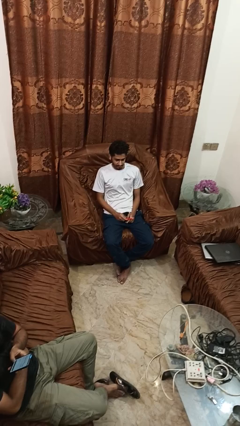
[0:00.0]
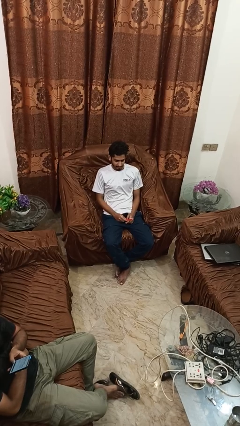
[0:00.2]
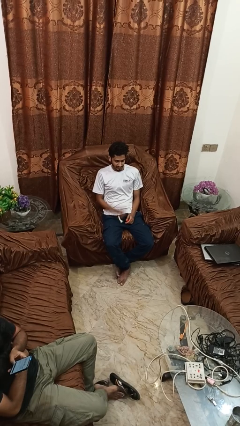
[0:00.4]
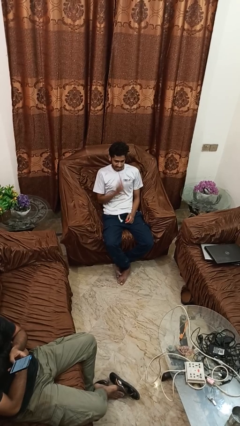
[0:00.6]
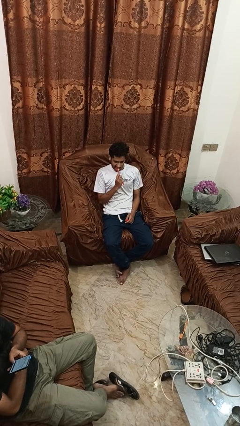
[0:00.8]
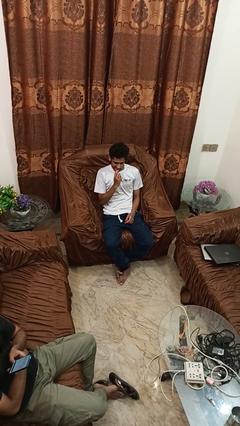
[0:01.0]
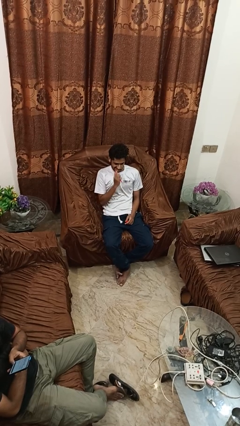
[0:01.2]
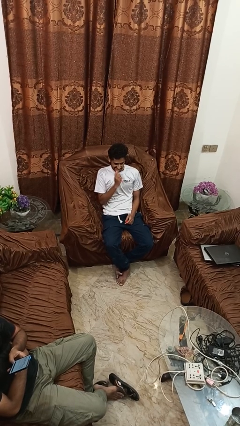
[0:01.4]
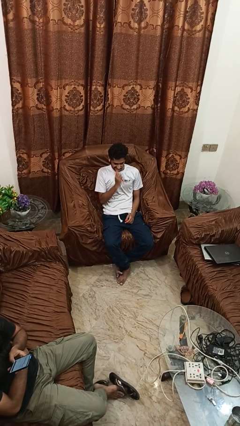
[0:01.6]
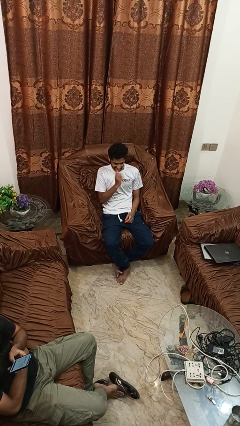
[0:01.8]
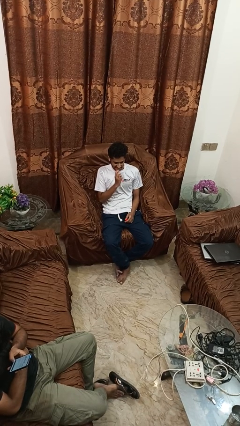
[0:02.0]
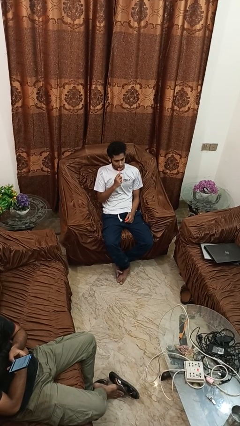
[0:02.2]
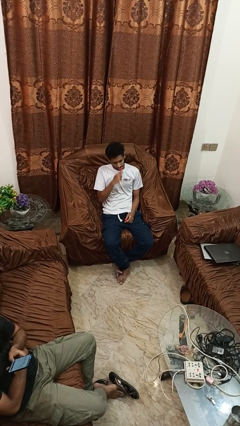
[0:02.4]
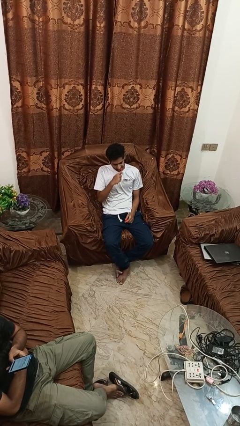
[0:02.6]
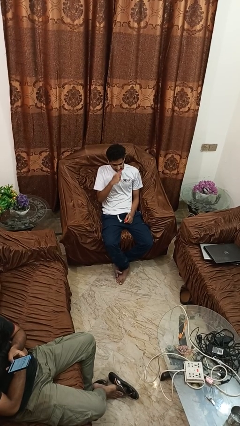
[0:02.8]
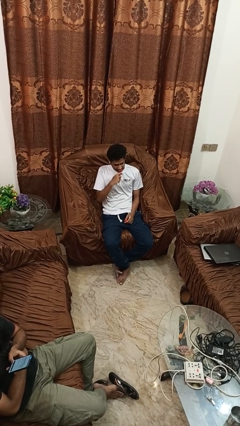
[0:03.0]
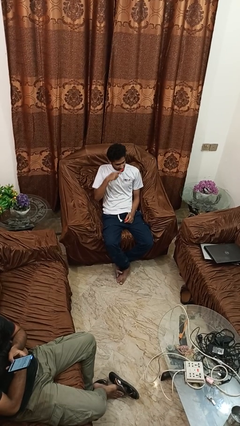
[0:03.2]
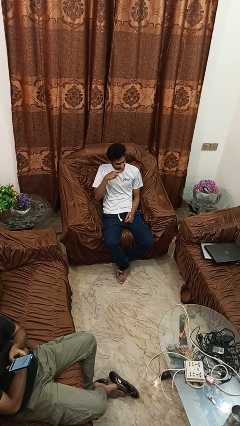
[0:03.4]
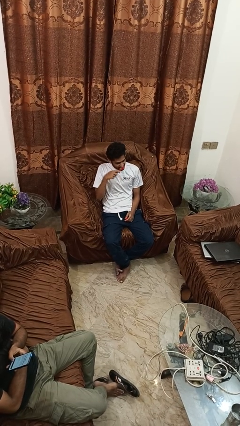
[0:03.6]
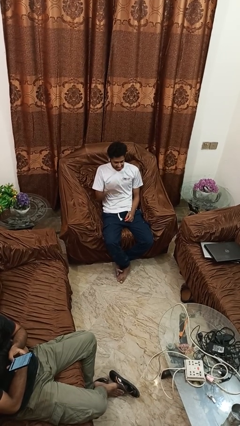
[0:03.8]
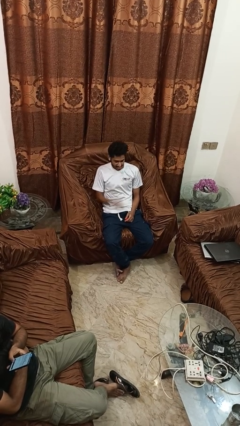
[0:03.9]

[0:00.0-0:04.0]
person brushes teeth

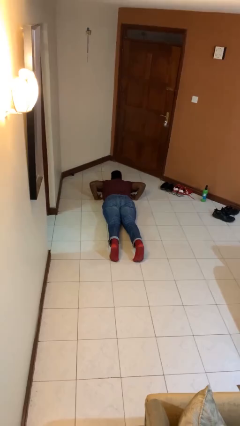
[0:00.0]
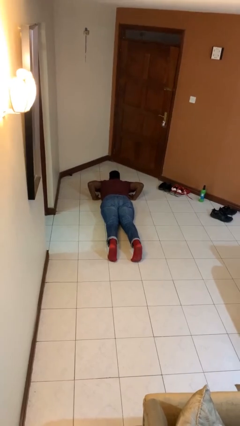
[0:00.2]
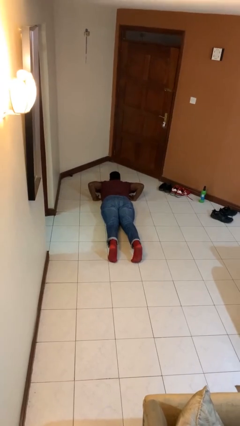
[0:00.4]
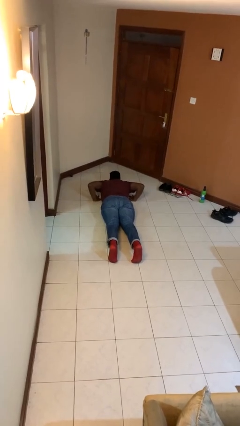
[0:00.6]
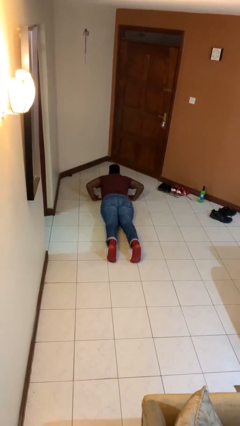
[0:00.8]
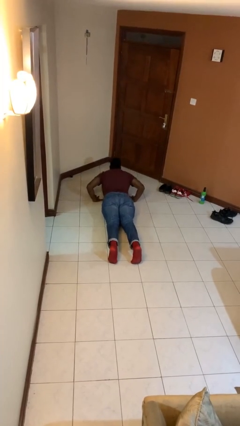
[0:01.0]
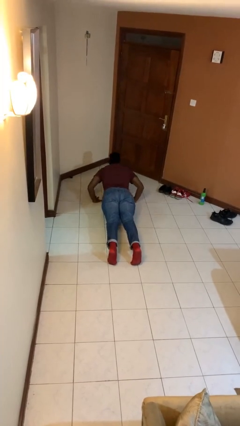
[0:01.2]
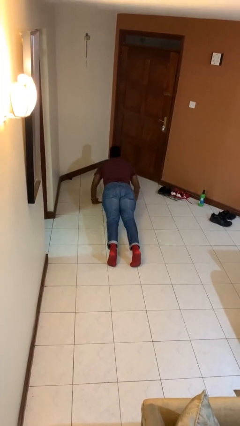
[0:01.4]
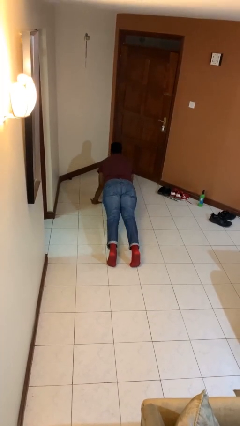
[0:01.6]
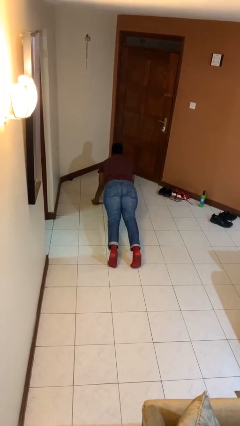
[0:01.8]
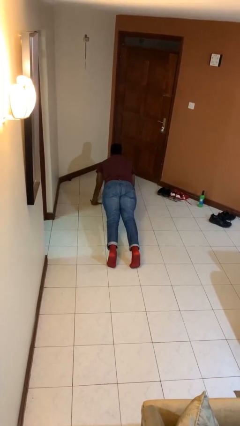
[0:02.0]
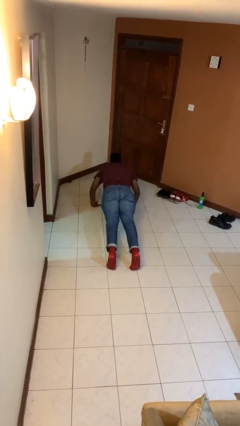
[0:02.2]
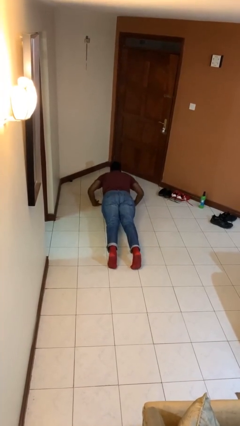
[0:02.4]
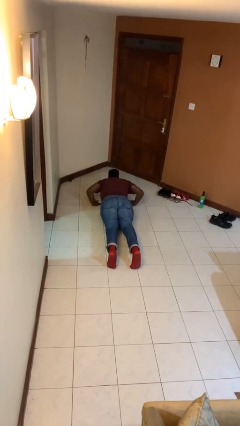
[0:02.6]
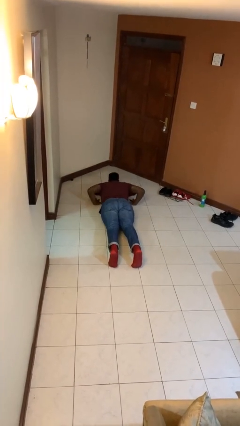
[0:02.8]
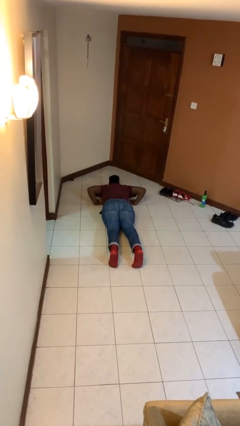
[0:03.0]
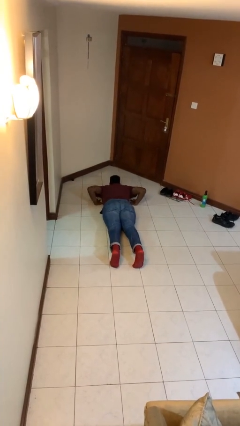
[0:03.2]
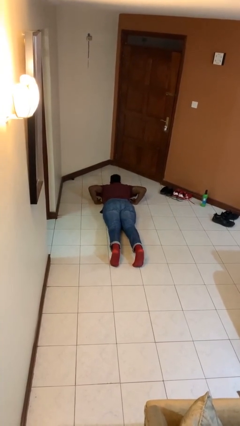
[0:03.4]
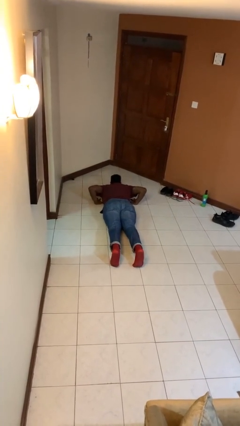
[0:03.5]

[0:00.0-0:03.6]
person exercises with pushup

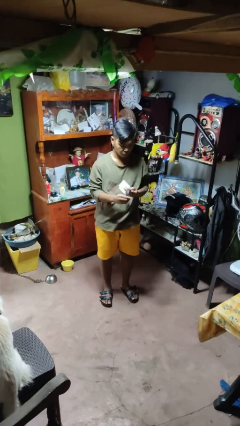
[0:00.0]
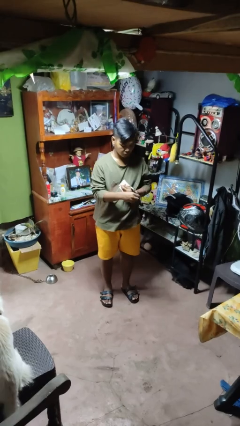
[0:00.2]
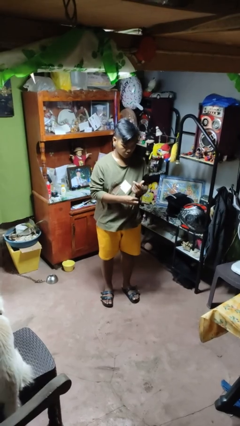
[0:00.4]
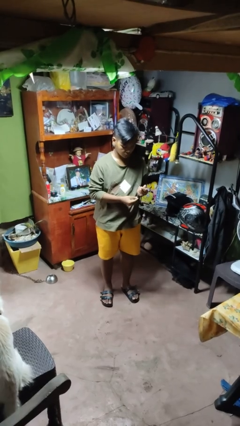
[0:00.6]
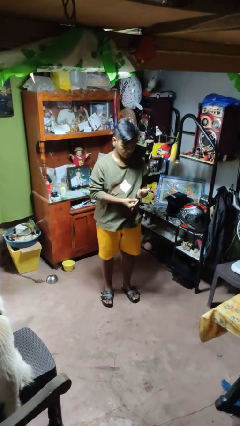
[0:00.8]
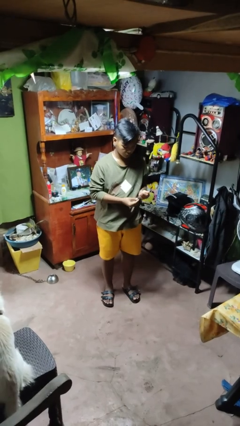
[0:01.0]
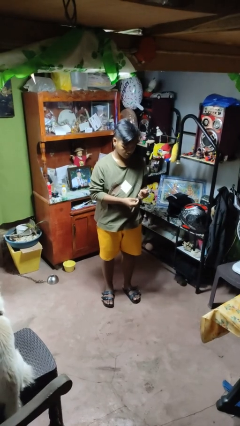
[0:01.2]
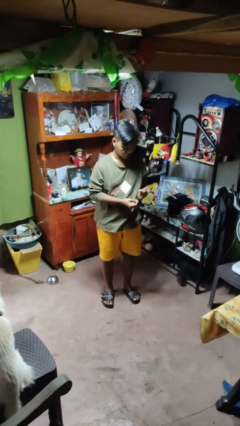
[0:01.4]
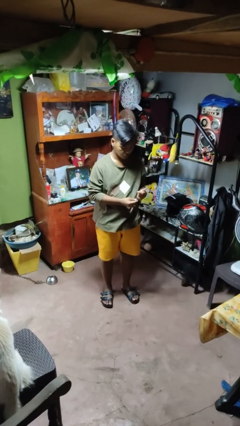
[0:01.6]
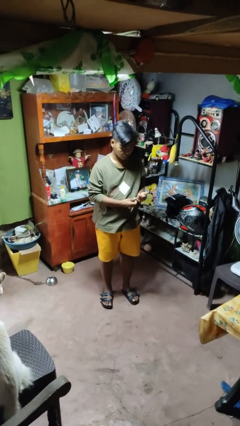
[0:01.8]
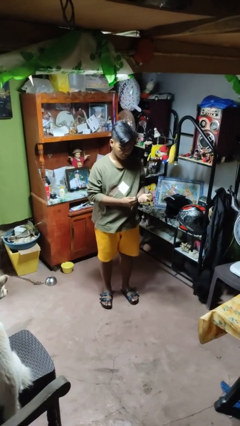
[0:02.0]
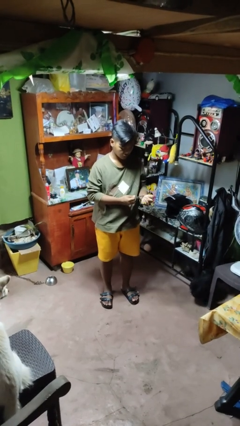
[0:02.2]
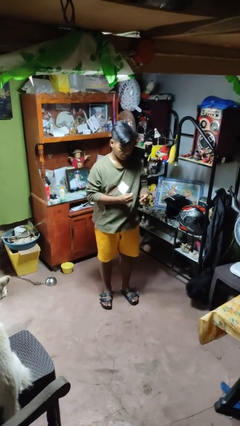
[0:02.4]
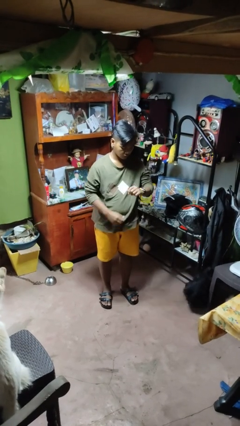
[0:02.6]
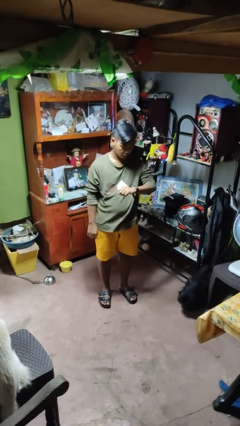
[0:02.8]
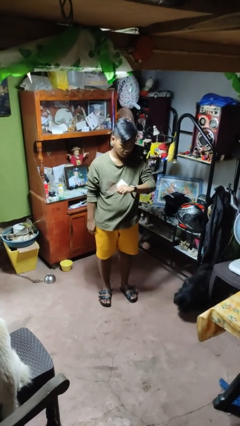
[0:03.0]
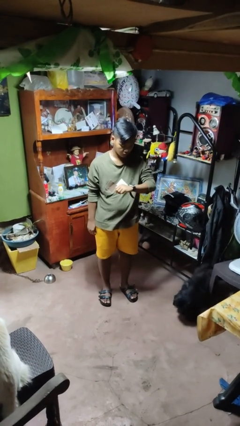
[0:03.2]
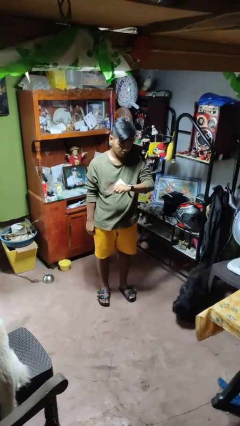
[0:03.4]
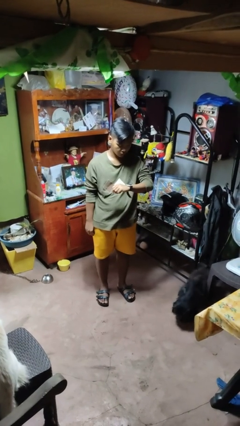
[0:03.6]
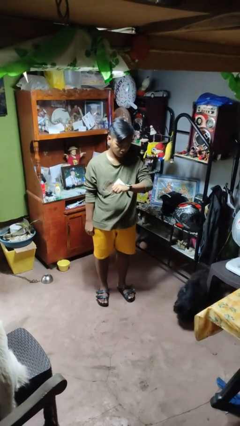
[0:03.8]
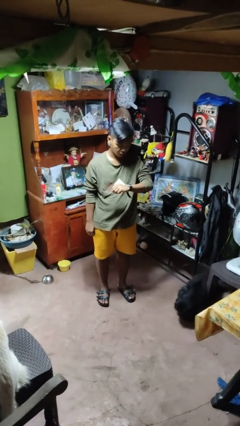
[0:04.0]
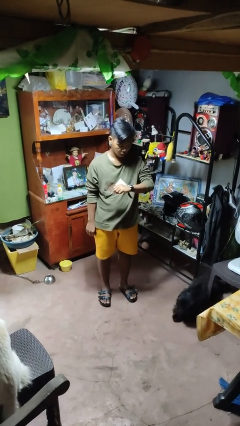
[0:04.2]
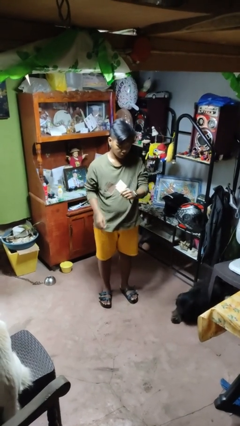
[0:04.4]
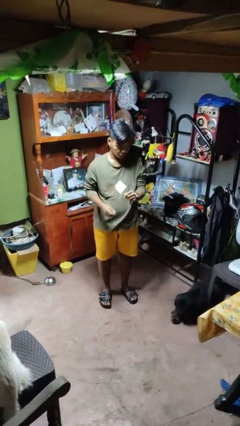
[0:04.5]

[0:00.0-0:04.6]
person puts on wristwatch

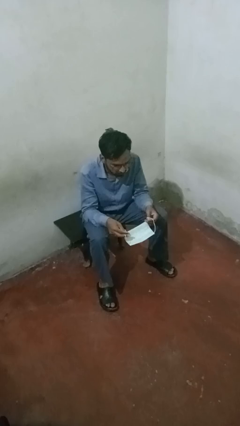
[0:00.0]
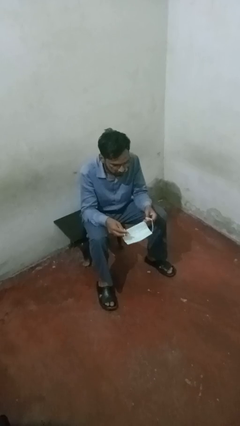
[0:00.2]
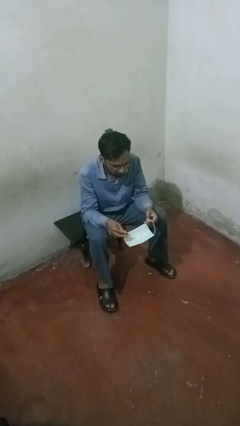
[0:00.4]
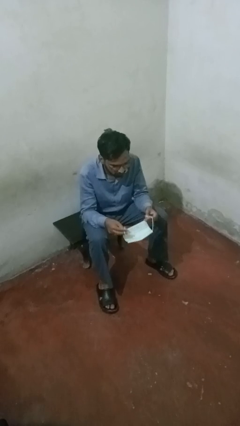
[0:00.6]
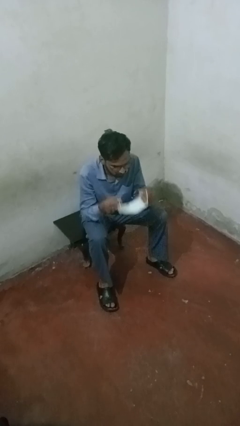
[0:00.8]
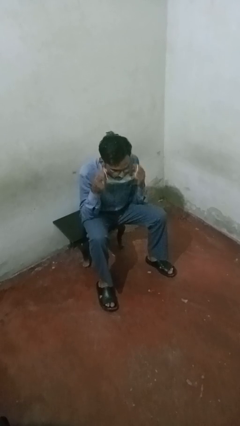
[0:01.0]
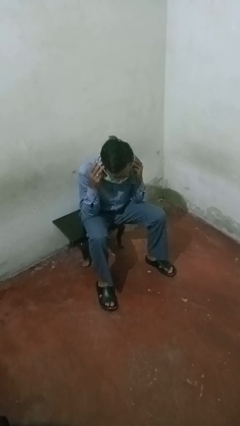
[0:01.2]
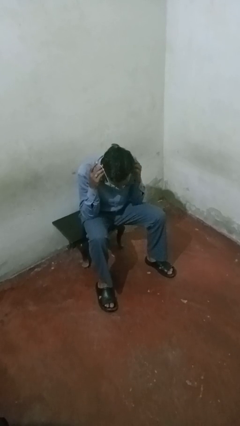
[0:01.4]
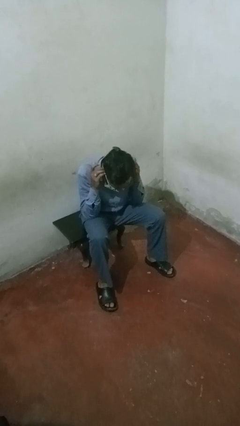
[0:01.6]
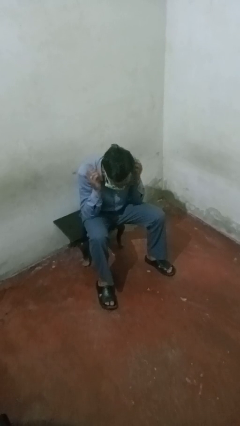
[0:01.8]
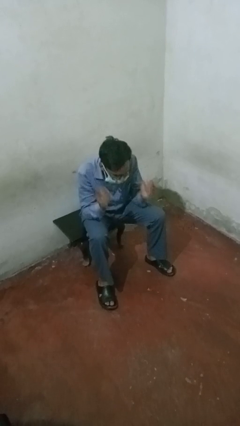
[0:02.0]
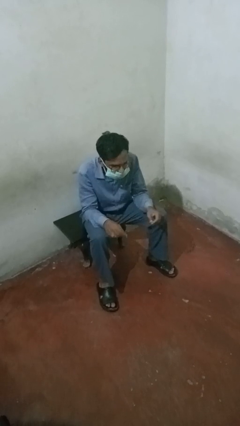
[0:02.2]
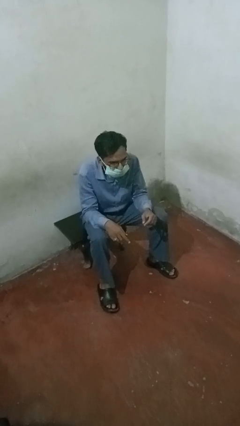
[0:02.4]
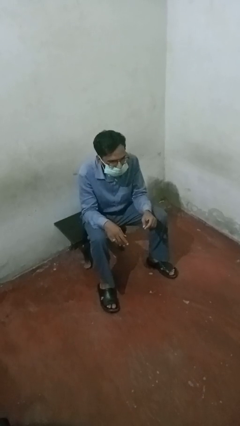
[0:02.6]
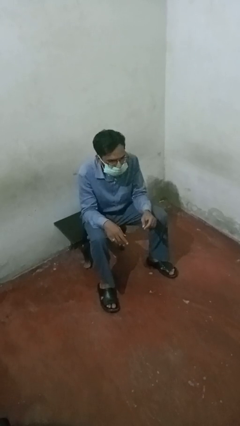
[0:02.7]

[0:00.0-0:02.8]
person puts on facemask

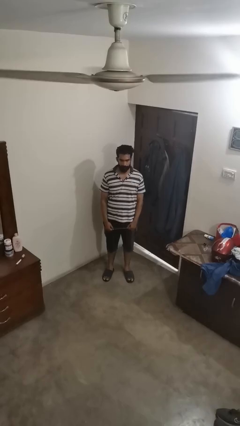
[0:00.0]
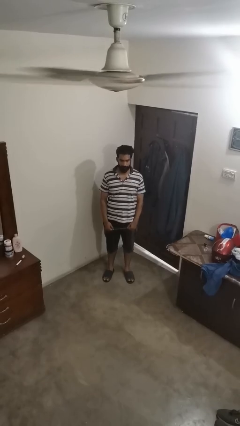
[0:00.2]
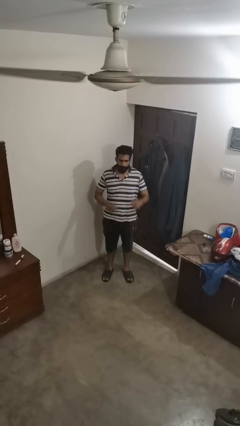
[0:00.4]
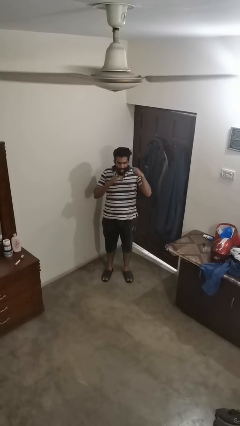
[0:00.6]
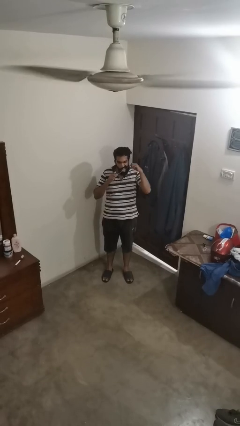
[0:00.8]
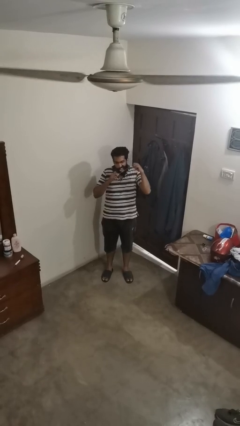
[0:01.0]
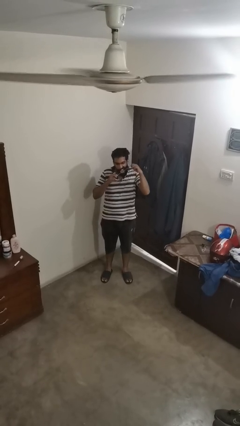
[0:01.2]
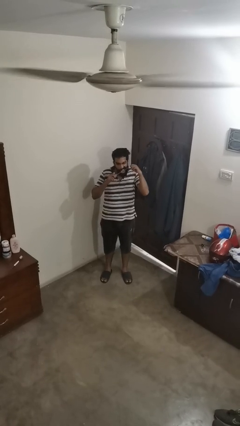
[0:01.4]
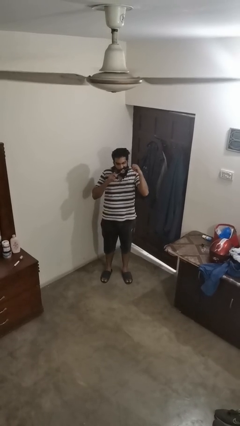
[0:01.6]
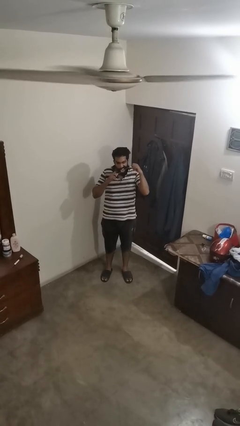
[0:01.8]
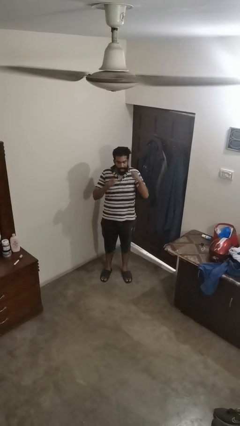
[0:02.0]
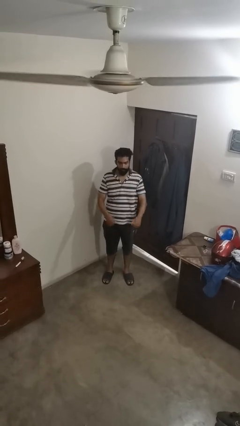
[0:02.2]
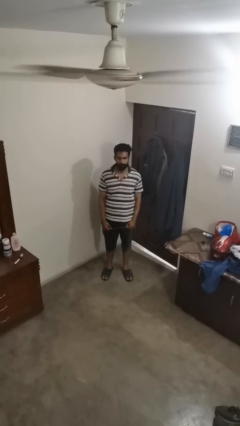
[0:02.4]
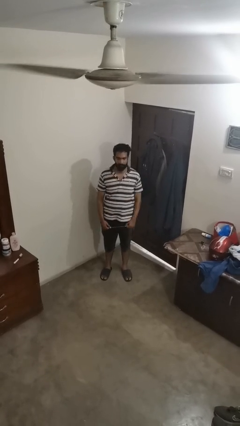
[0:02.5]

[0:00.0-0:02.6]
person flosses
